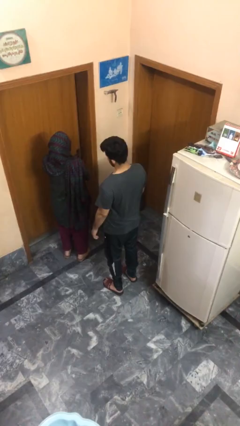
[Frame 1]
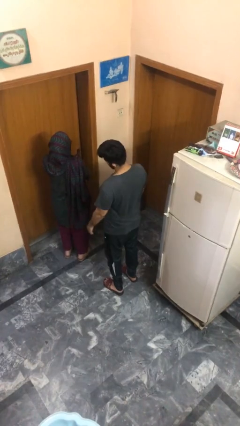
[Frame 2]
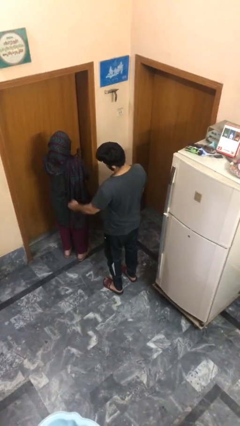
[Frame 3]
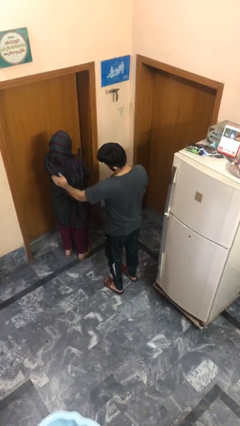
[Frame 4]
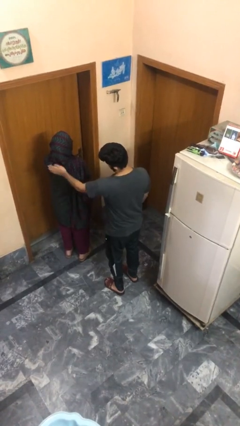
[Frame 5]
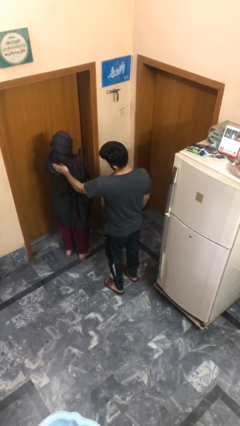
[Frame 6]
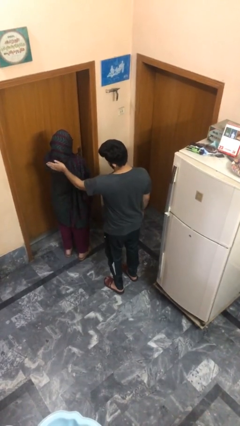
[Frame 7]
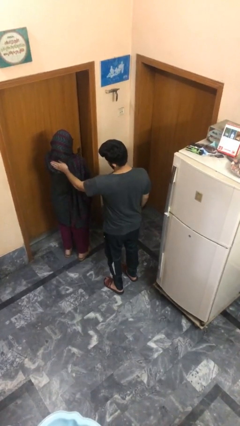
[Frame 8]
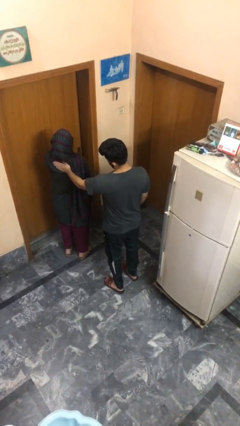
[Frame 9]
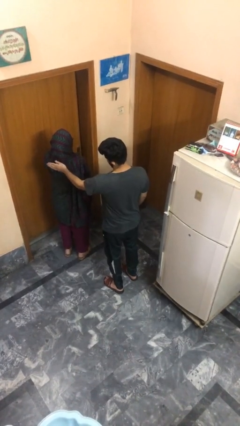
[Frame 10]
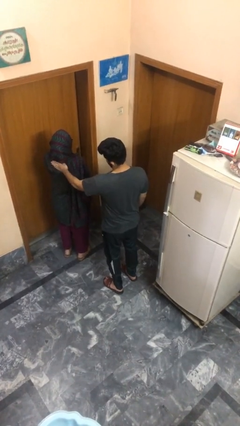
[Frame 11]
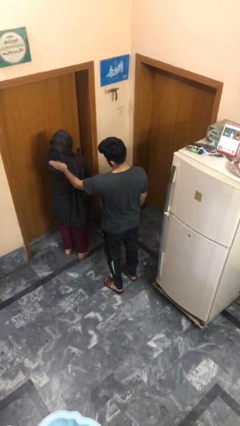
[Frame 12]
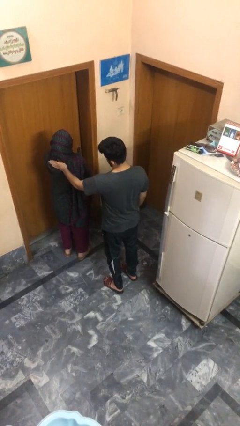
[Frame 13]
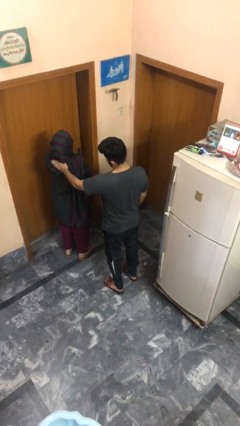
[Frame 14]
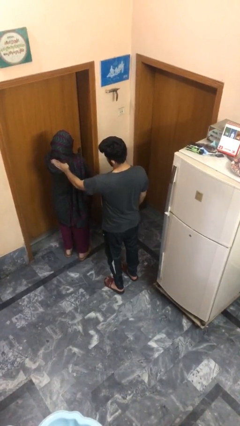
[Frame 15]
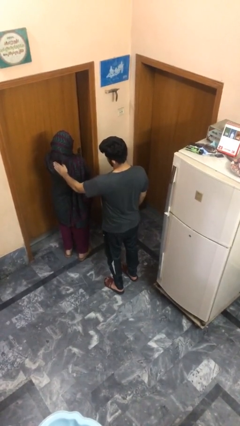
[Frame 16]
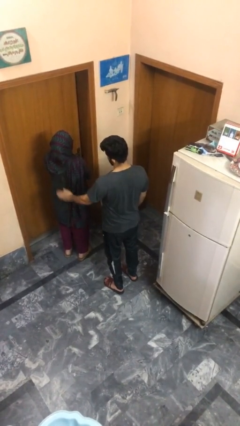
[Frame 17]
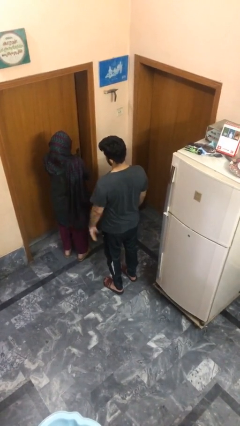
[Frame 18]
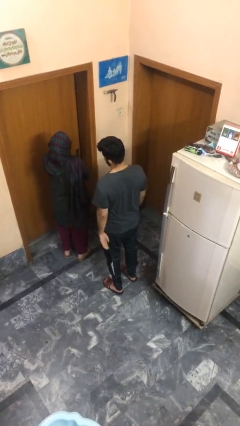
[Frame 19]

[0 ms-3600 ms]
person touches back of person

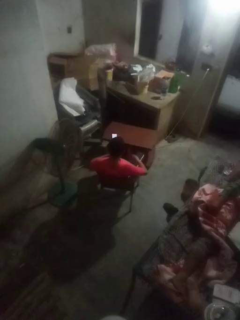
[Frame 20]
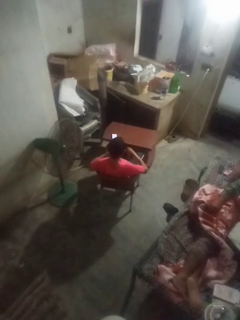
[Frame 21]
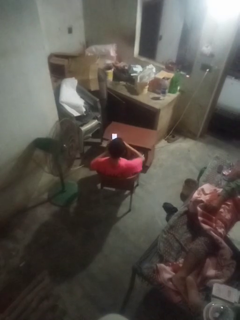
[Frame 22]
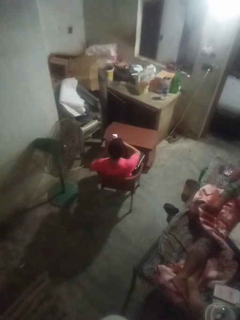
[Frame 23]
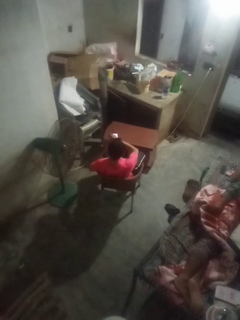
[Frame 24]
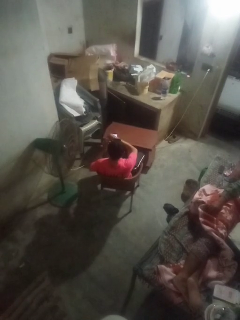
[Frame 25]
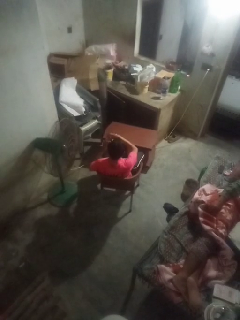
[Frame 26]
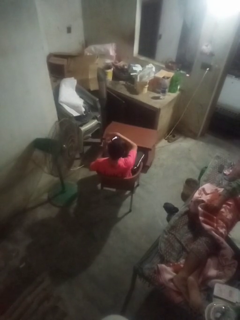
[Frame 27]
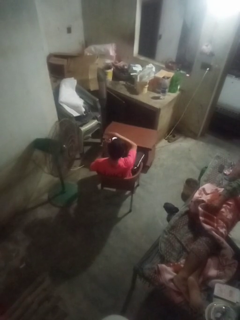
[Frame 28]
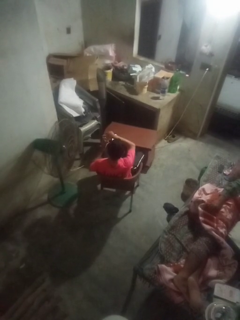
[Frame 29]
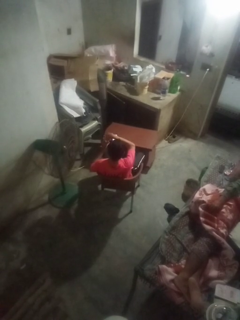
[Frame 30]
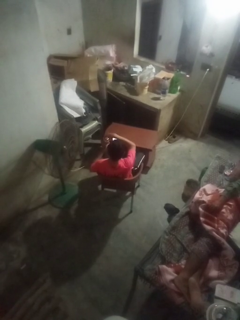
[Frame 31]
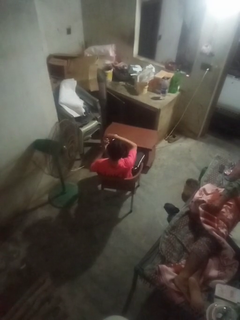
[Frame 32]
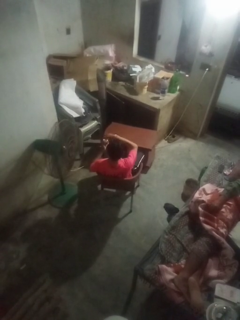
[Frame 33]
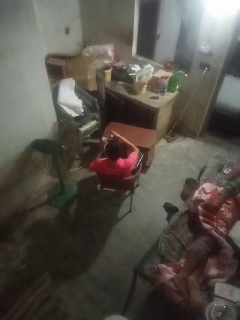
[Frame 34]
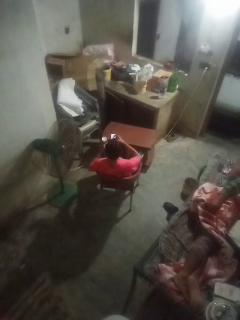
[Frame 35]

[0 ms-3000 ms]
person opens jar

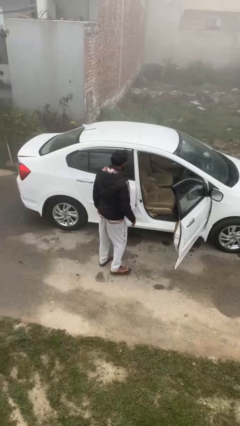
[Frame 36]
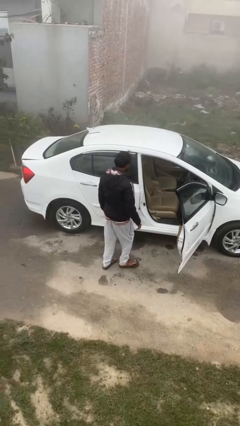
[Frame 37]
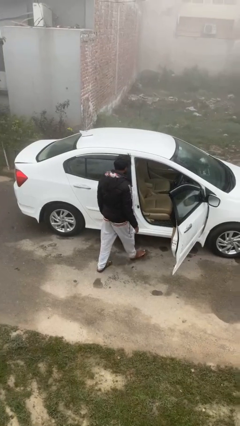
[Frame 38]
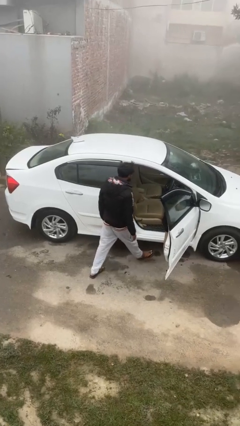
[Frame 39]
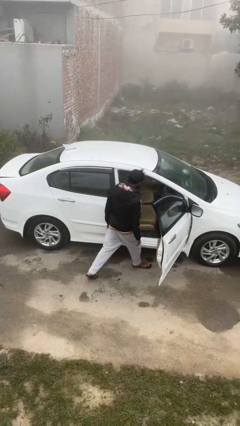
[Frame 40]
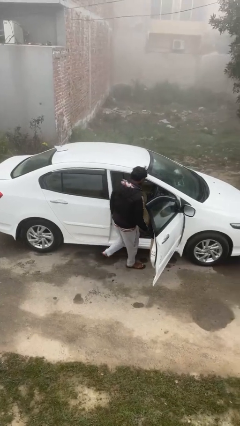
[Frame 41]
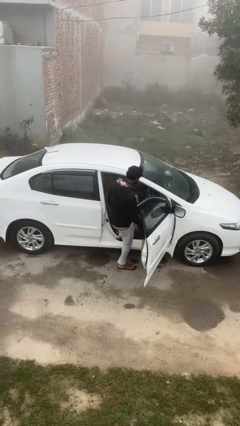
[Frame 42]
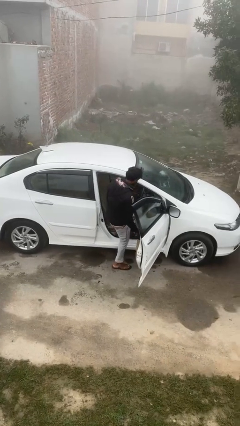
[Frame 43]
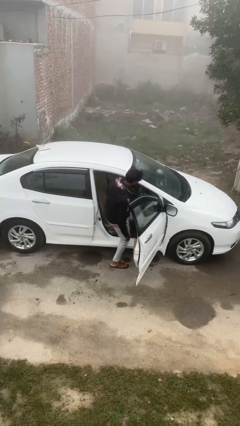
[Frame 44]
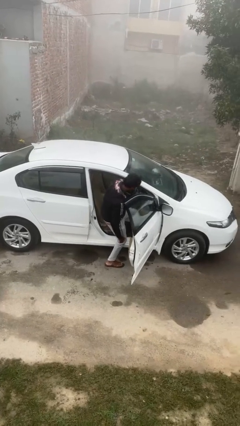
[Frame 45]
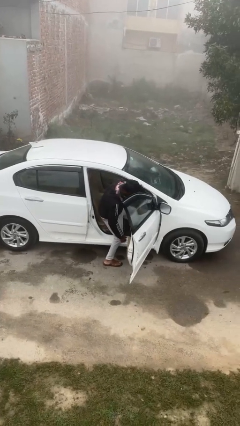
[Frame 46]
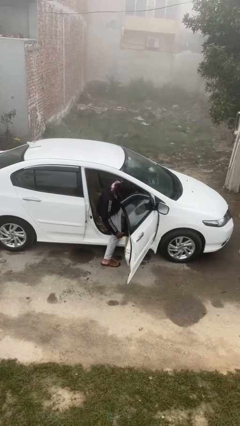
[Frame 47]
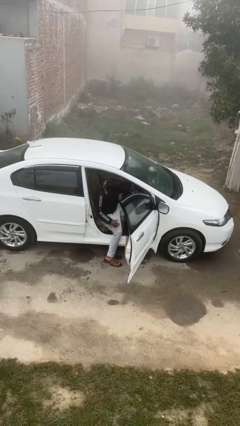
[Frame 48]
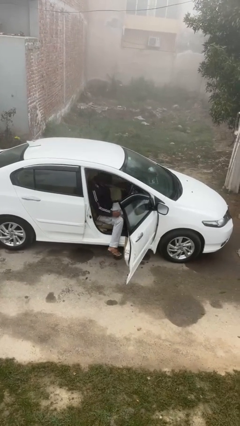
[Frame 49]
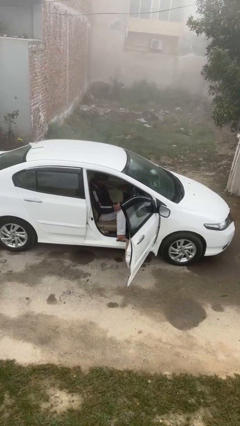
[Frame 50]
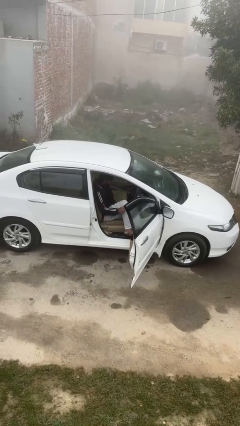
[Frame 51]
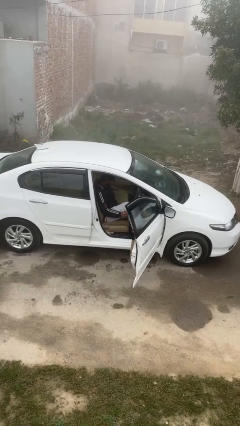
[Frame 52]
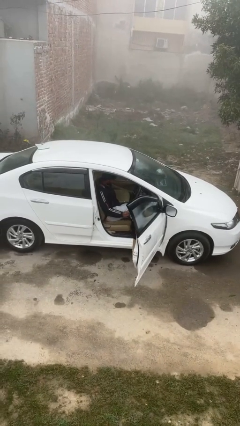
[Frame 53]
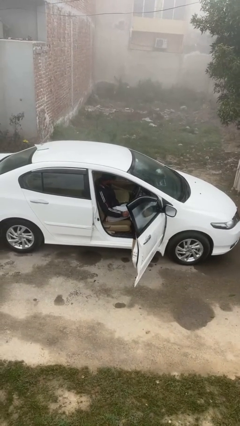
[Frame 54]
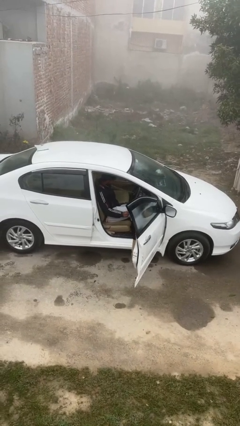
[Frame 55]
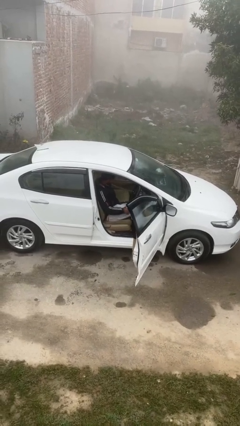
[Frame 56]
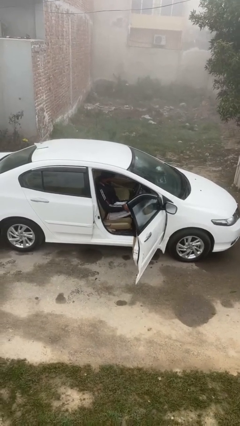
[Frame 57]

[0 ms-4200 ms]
person enters car

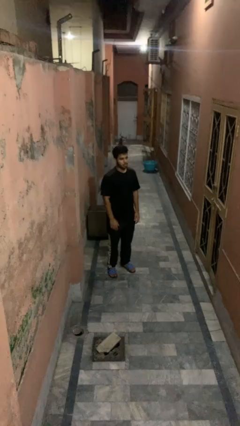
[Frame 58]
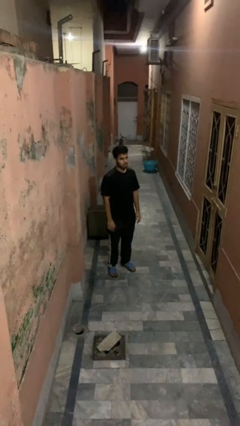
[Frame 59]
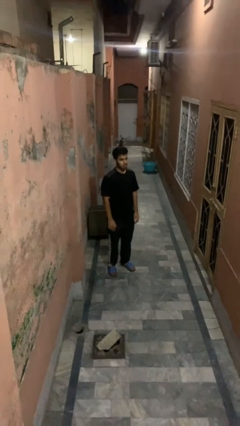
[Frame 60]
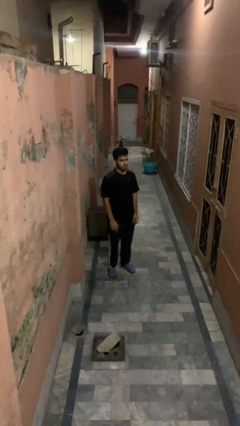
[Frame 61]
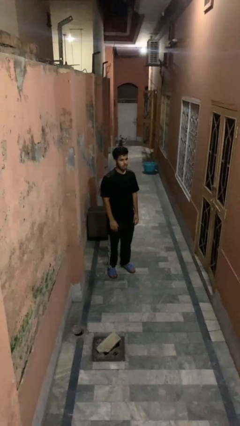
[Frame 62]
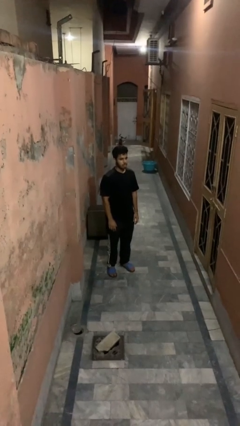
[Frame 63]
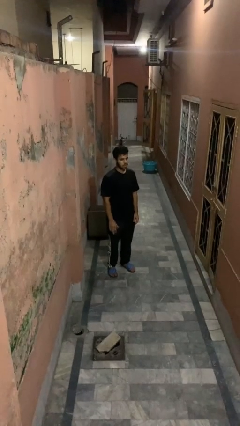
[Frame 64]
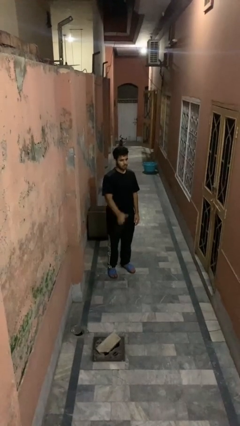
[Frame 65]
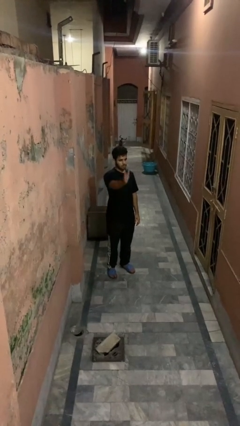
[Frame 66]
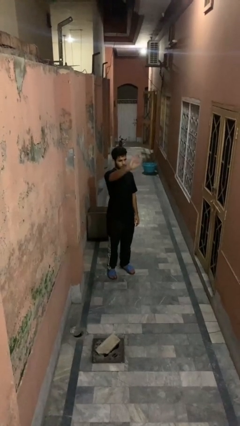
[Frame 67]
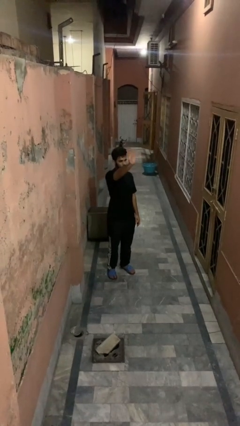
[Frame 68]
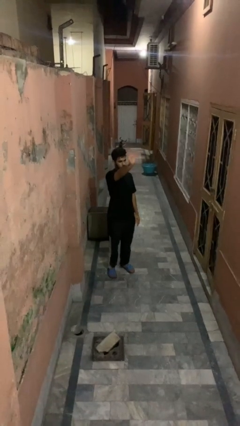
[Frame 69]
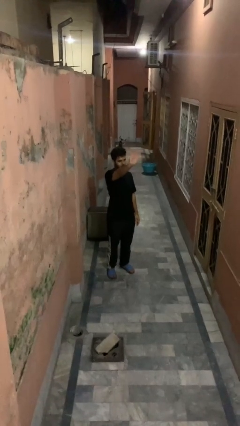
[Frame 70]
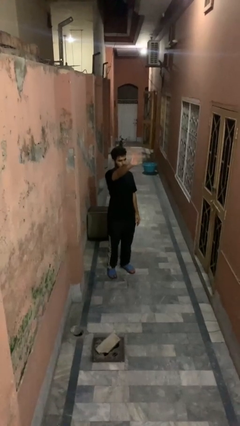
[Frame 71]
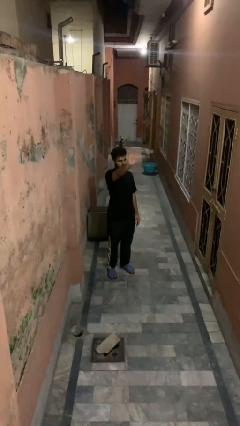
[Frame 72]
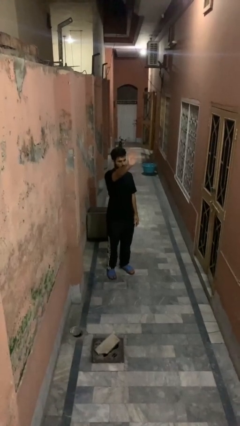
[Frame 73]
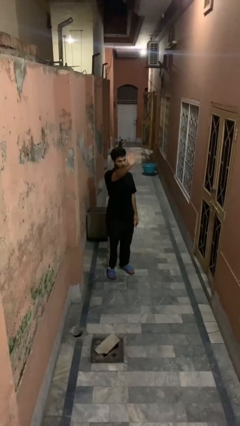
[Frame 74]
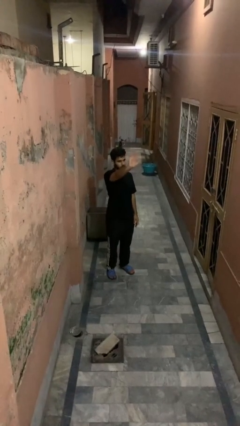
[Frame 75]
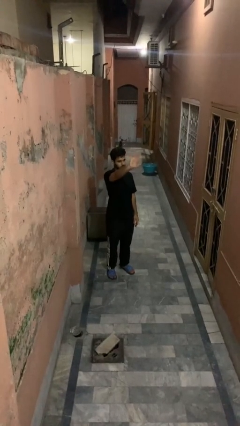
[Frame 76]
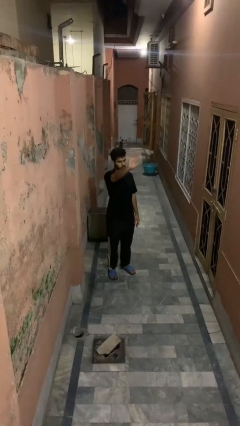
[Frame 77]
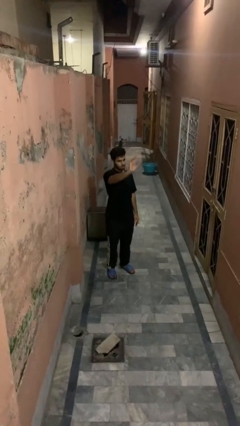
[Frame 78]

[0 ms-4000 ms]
person waves at person

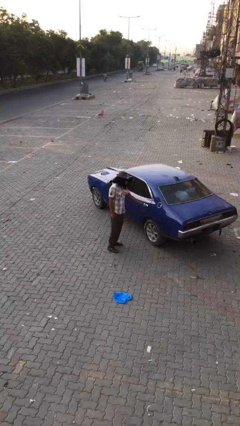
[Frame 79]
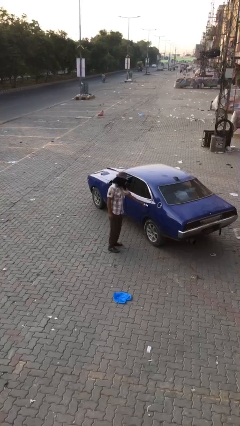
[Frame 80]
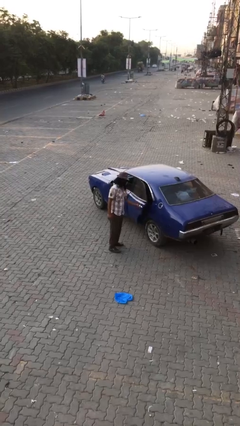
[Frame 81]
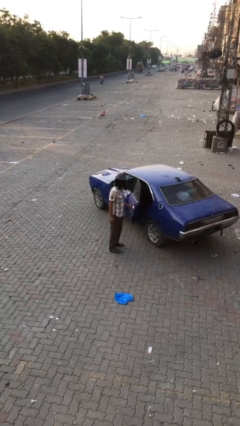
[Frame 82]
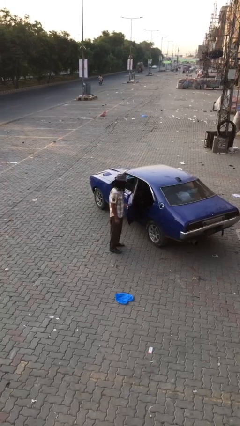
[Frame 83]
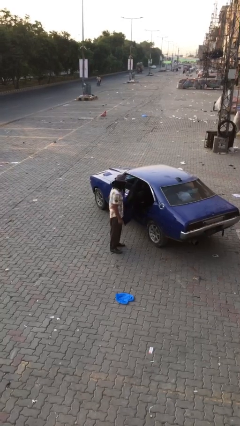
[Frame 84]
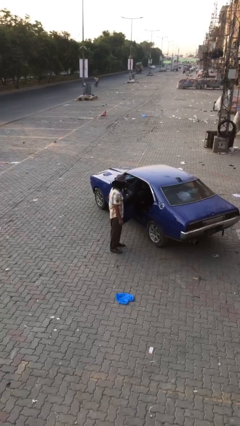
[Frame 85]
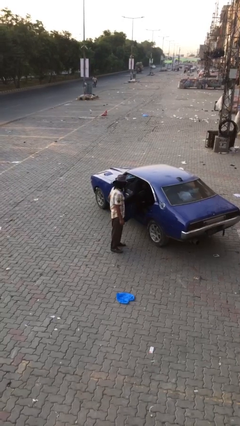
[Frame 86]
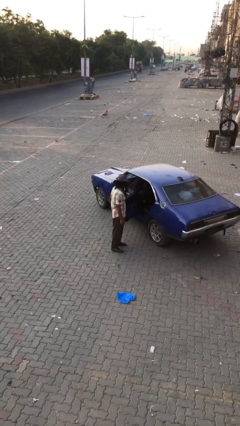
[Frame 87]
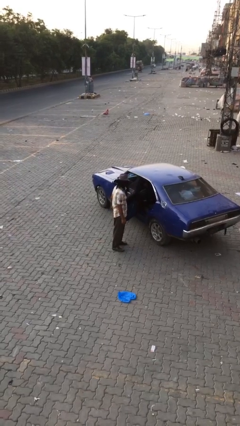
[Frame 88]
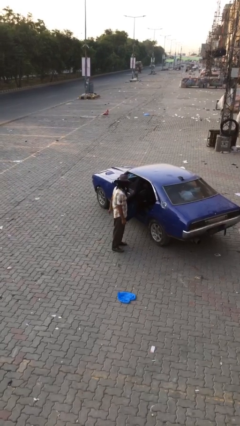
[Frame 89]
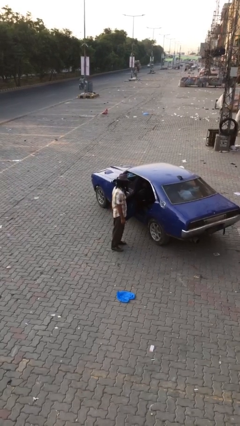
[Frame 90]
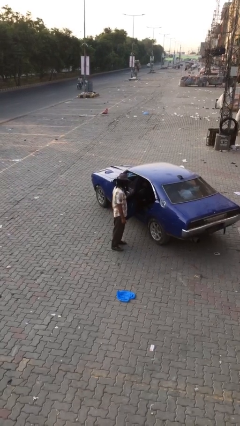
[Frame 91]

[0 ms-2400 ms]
person opens car door

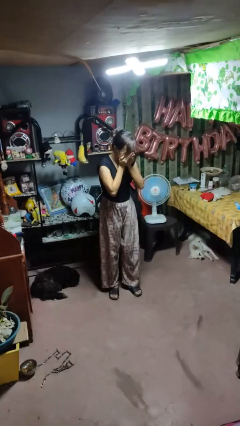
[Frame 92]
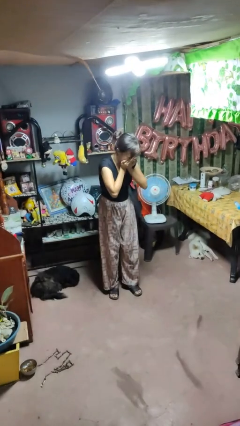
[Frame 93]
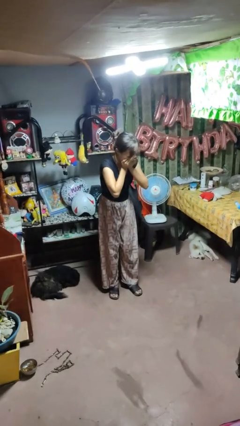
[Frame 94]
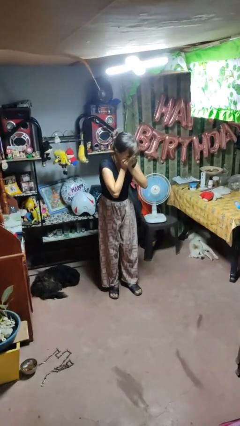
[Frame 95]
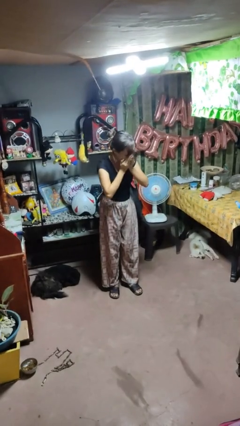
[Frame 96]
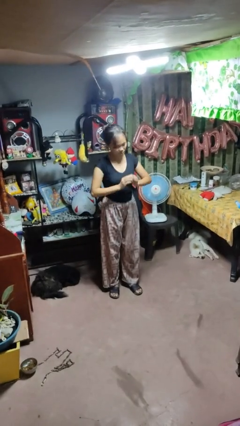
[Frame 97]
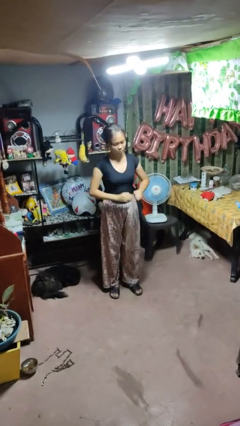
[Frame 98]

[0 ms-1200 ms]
person sneezes into hand
